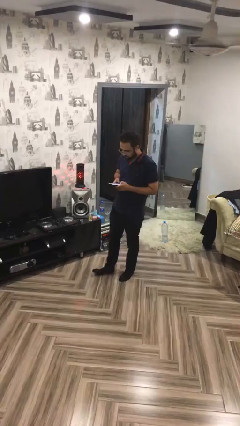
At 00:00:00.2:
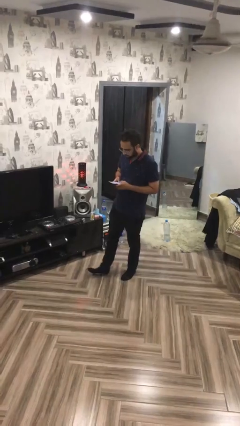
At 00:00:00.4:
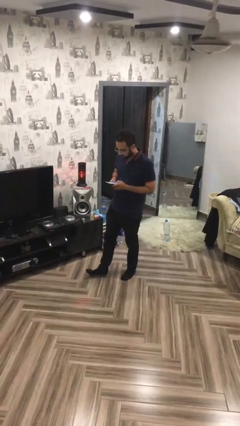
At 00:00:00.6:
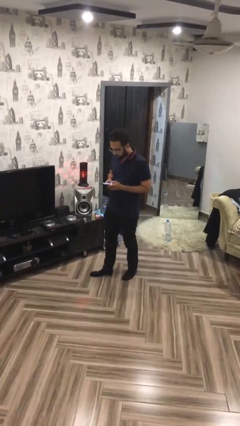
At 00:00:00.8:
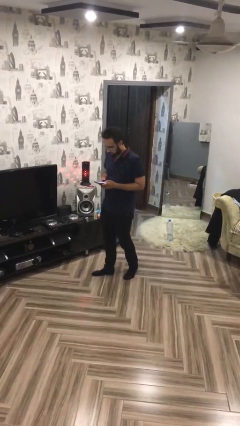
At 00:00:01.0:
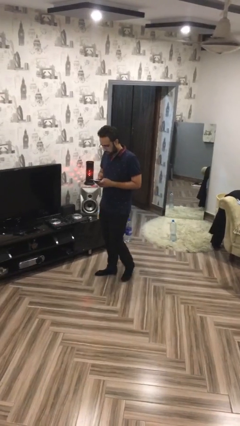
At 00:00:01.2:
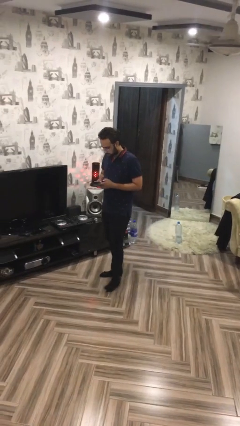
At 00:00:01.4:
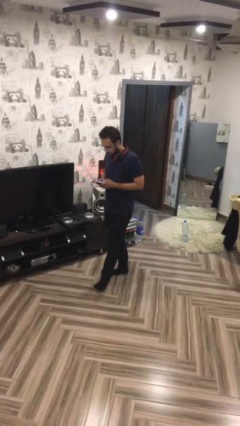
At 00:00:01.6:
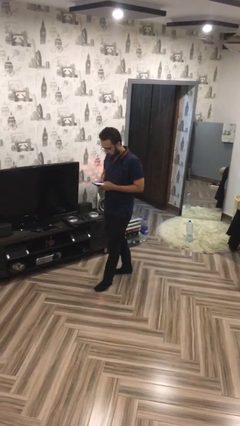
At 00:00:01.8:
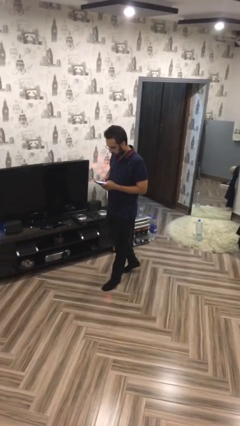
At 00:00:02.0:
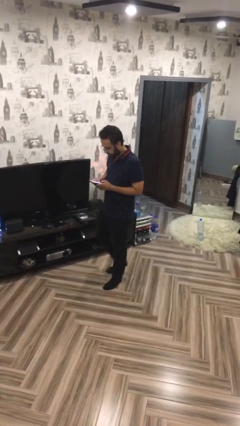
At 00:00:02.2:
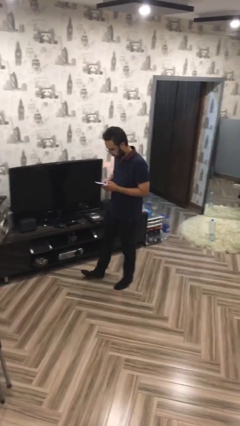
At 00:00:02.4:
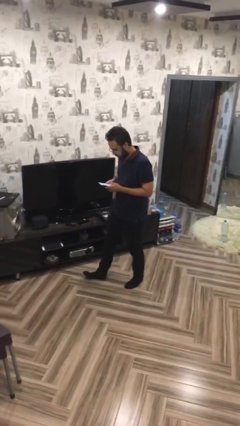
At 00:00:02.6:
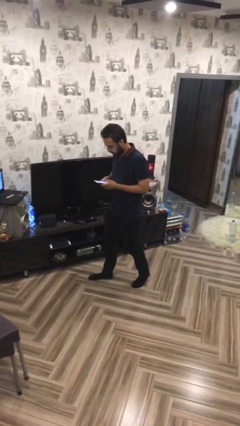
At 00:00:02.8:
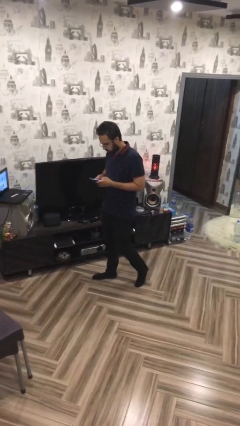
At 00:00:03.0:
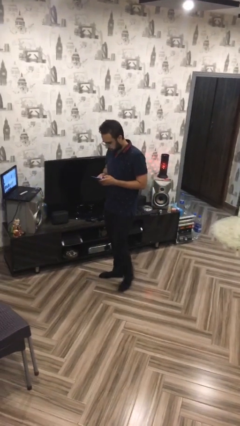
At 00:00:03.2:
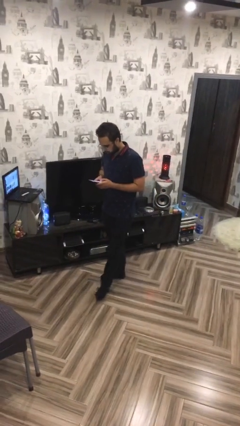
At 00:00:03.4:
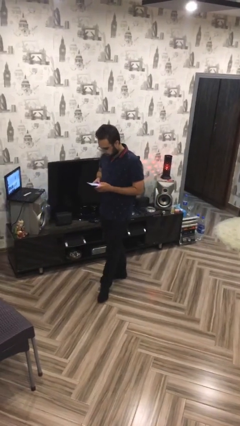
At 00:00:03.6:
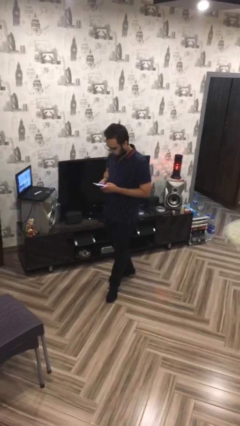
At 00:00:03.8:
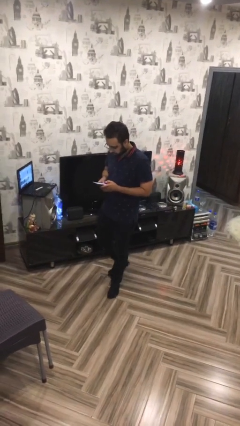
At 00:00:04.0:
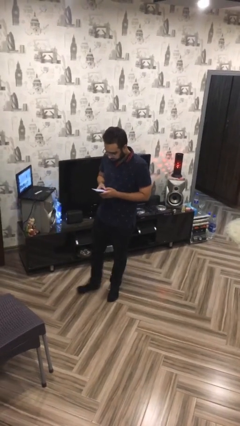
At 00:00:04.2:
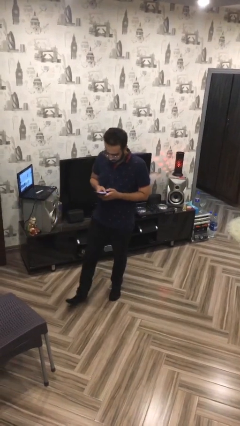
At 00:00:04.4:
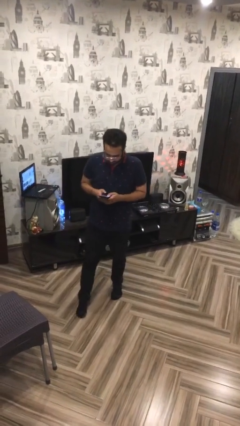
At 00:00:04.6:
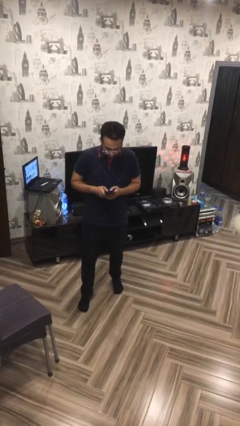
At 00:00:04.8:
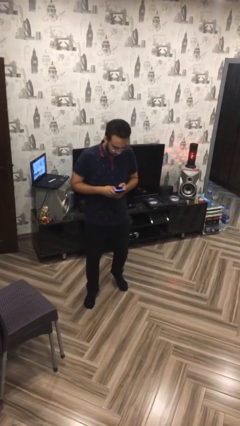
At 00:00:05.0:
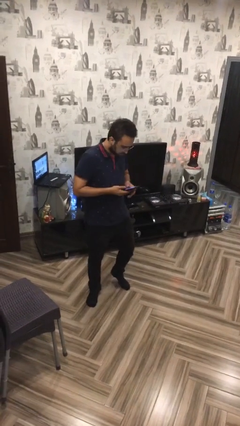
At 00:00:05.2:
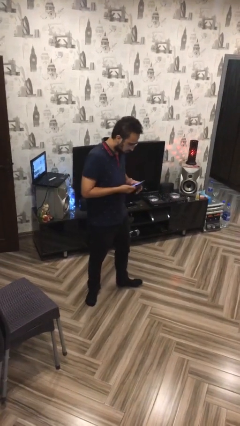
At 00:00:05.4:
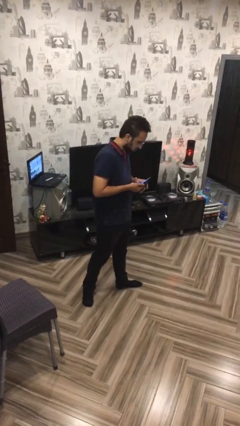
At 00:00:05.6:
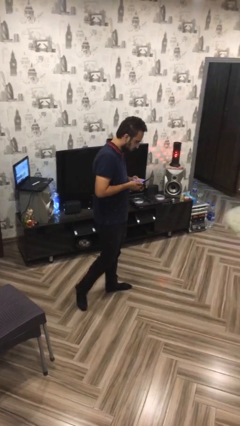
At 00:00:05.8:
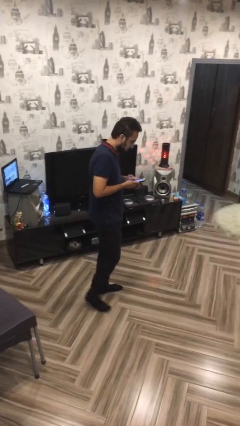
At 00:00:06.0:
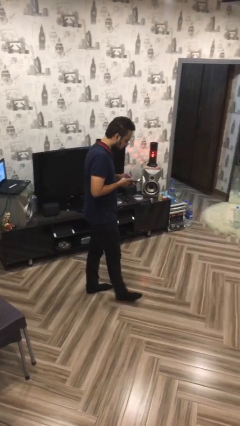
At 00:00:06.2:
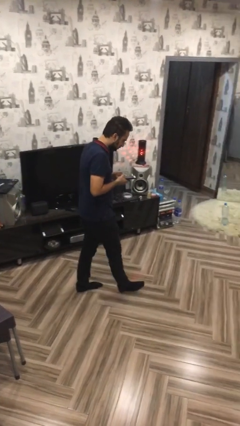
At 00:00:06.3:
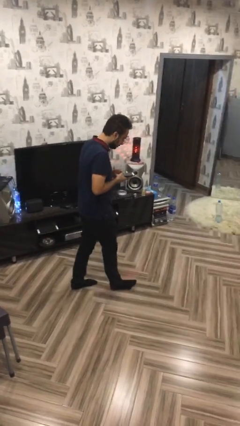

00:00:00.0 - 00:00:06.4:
person texts on phone

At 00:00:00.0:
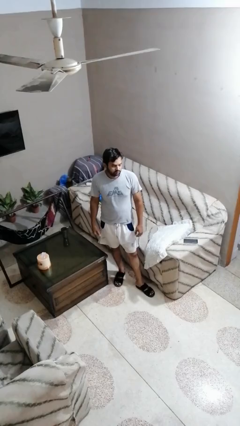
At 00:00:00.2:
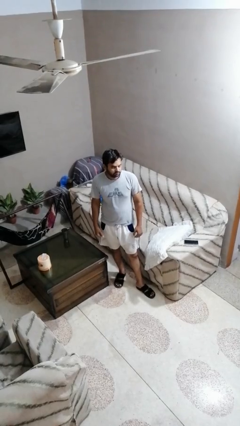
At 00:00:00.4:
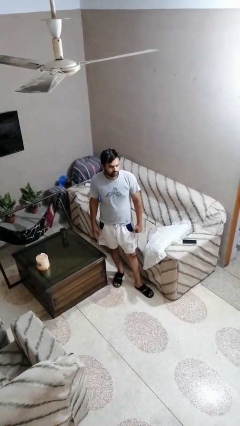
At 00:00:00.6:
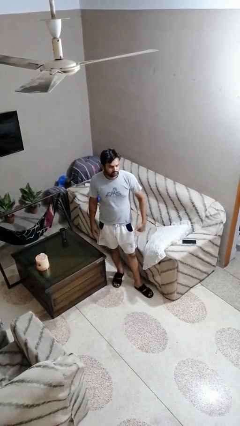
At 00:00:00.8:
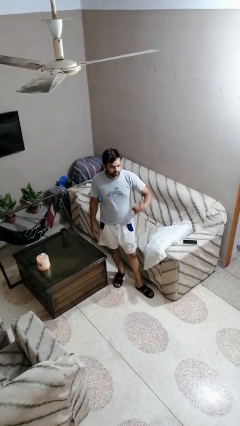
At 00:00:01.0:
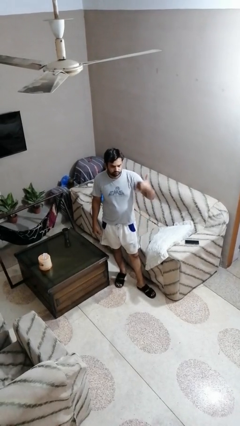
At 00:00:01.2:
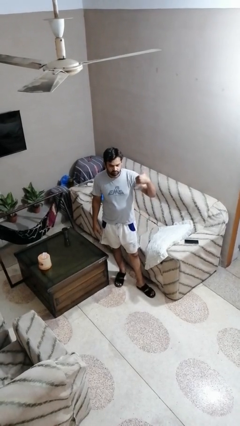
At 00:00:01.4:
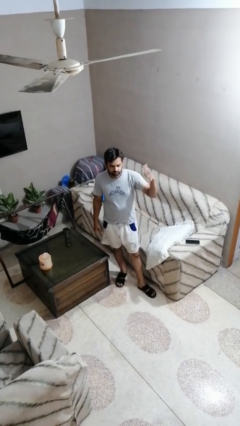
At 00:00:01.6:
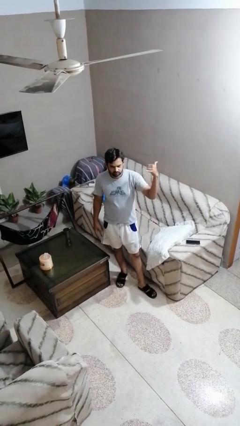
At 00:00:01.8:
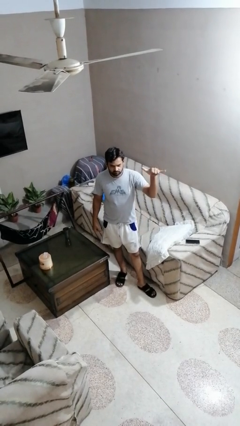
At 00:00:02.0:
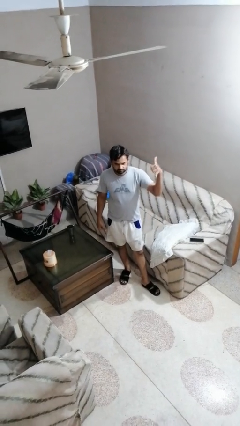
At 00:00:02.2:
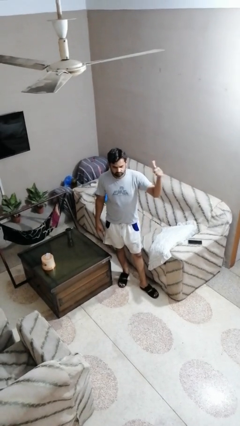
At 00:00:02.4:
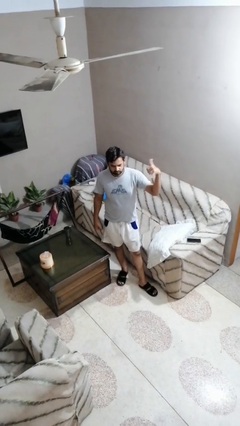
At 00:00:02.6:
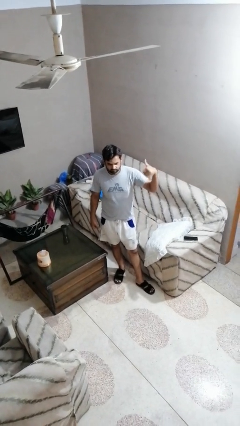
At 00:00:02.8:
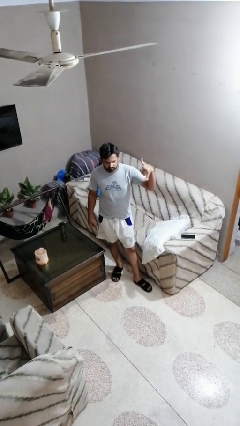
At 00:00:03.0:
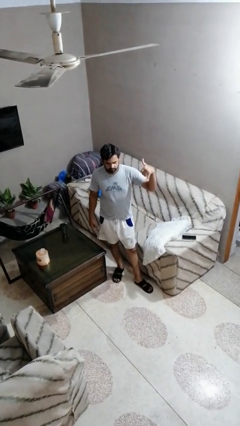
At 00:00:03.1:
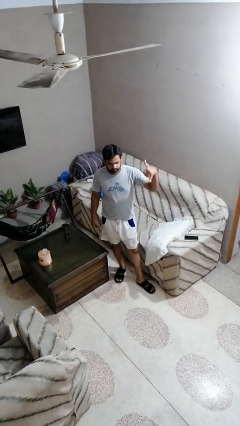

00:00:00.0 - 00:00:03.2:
person gestures hang loose

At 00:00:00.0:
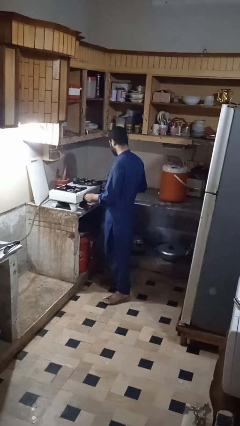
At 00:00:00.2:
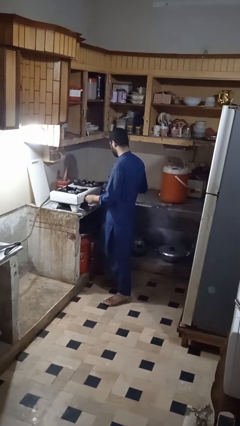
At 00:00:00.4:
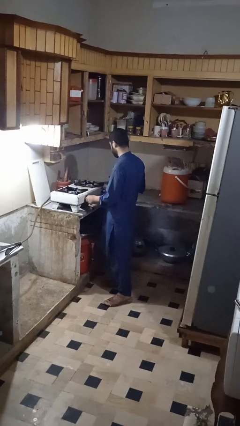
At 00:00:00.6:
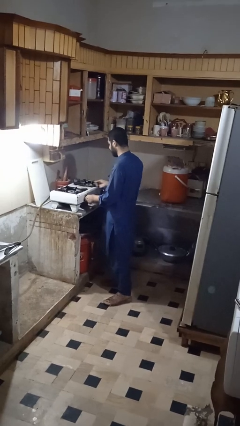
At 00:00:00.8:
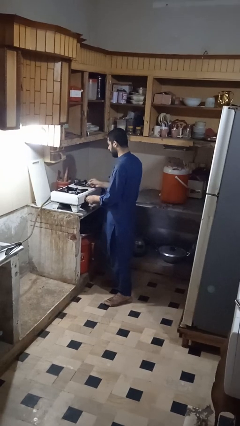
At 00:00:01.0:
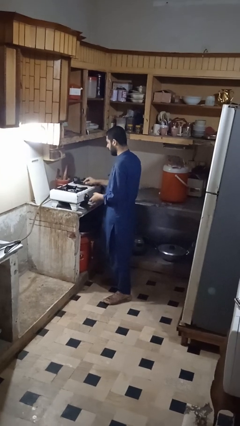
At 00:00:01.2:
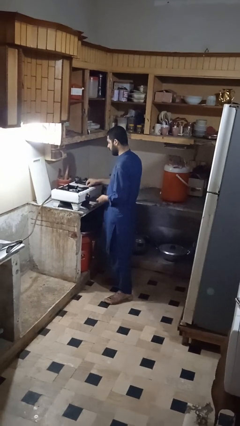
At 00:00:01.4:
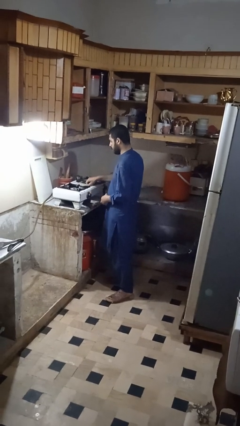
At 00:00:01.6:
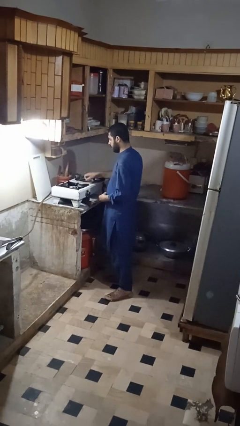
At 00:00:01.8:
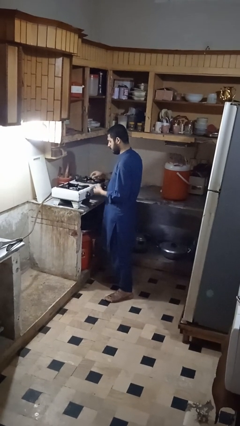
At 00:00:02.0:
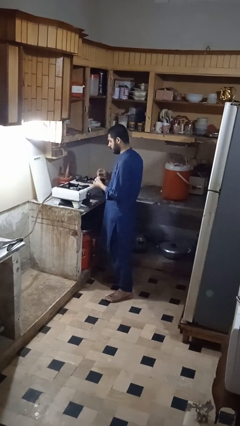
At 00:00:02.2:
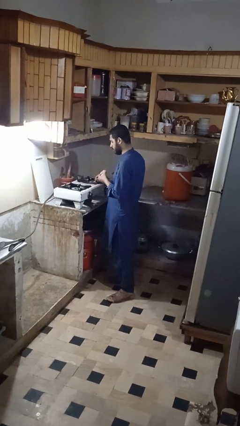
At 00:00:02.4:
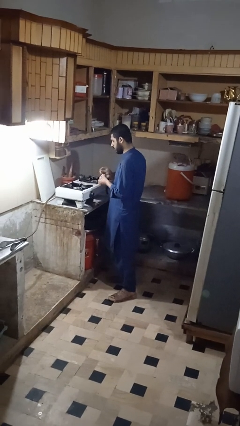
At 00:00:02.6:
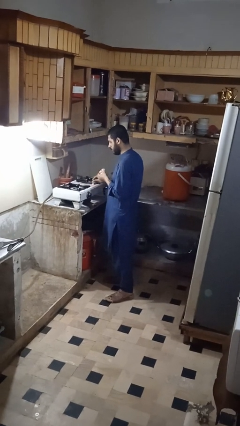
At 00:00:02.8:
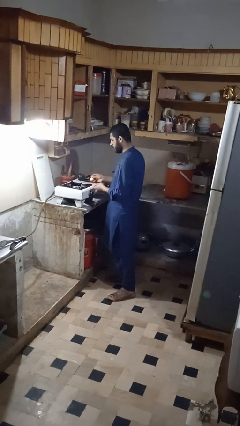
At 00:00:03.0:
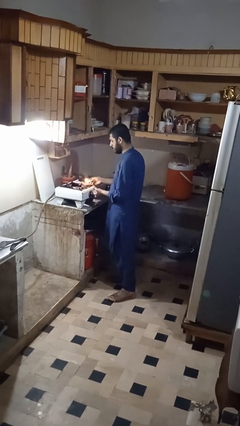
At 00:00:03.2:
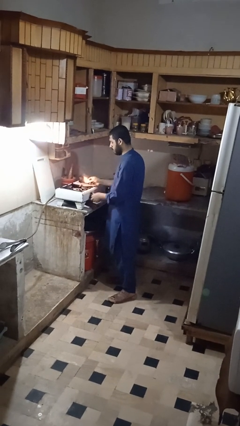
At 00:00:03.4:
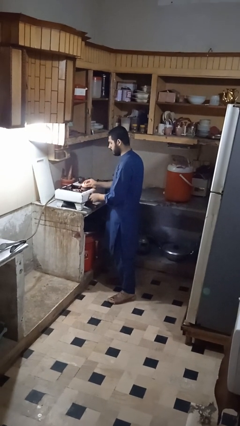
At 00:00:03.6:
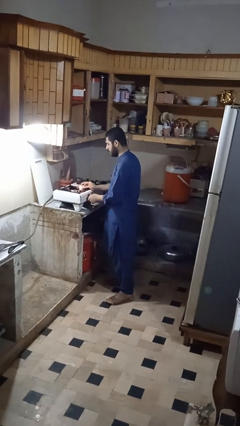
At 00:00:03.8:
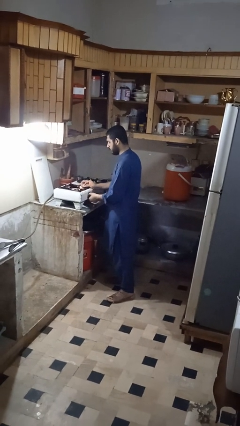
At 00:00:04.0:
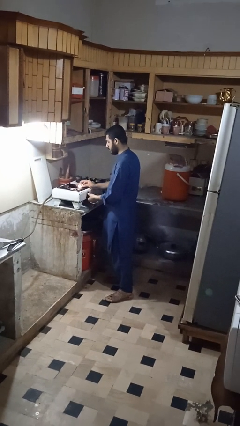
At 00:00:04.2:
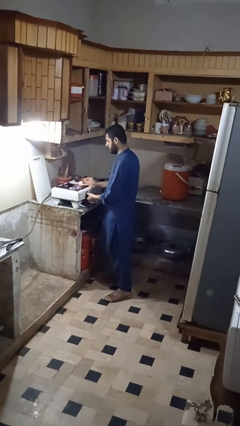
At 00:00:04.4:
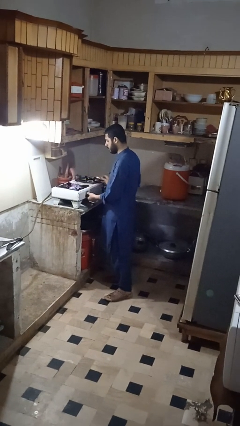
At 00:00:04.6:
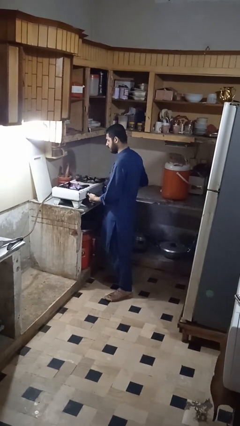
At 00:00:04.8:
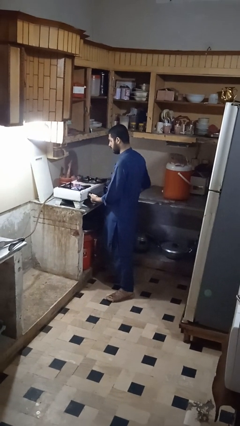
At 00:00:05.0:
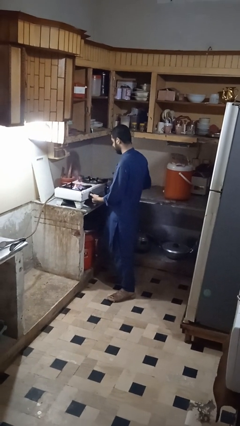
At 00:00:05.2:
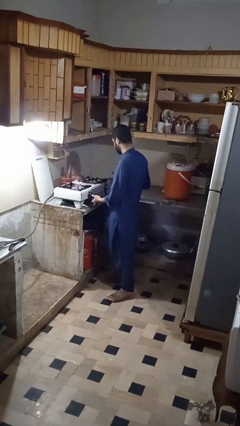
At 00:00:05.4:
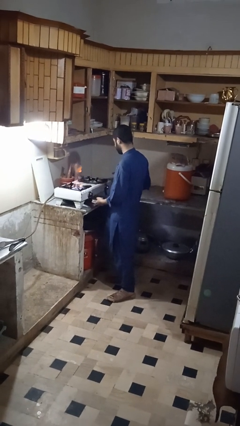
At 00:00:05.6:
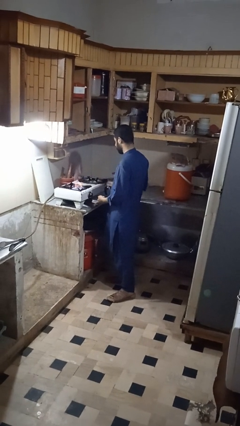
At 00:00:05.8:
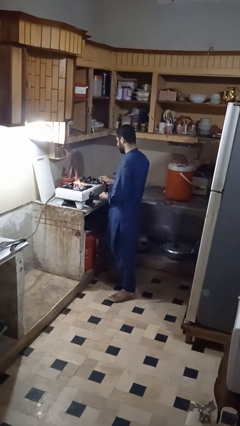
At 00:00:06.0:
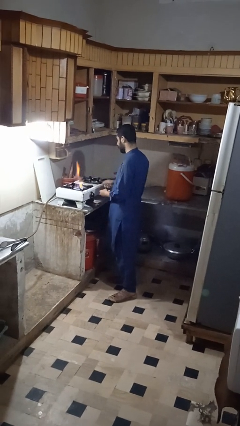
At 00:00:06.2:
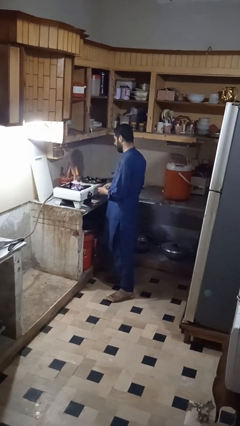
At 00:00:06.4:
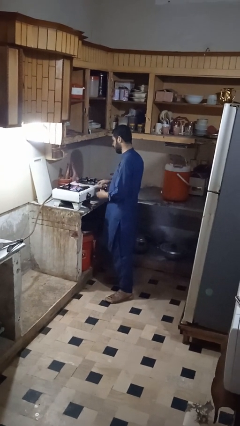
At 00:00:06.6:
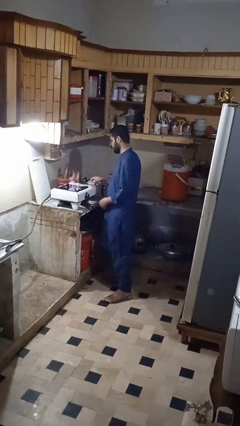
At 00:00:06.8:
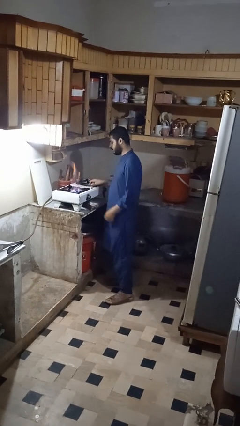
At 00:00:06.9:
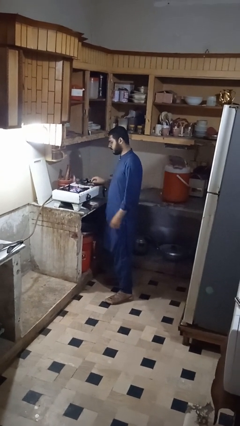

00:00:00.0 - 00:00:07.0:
person turns on stovetop

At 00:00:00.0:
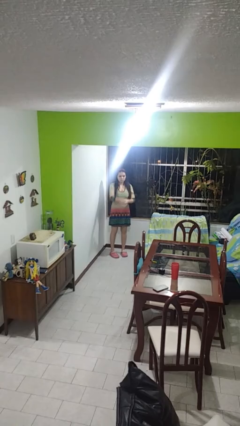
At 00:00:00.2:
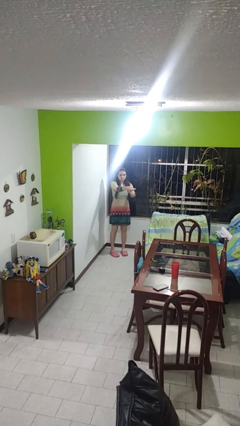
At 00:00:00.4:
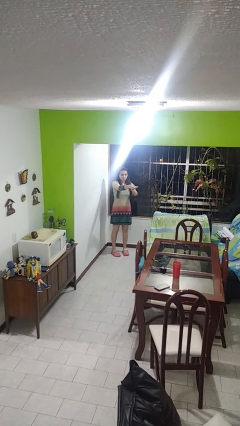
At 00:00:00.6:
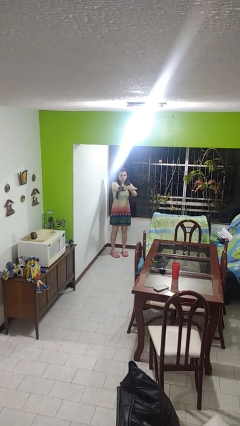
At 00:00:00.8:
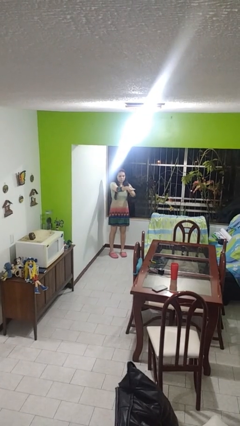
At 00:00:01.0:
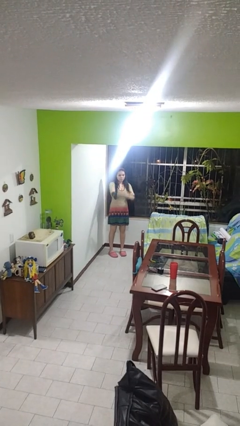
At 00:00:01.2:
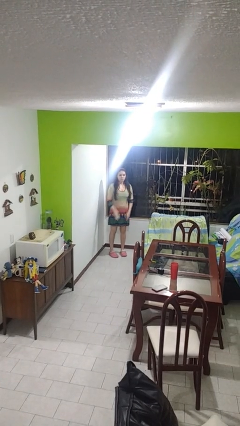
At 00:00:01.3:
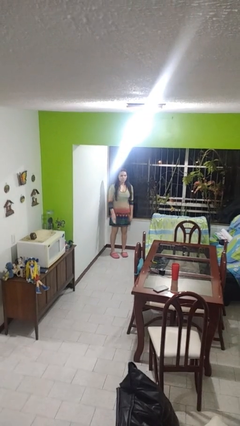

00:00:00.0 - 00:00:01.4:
person uses television remote
